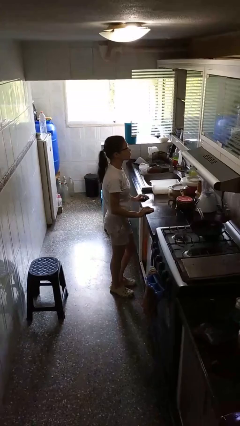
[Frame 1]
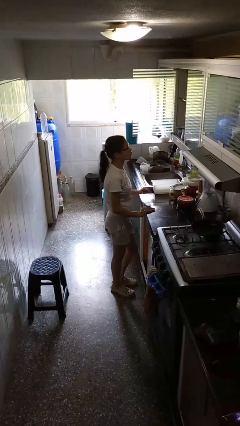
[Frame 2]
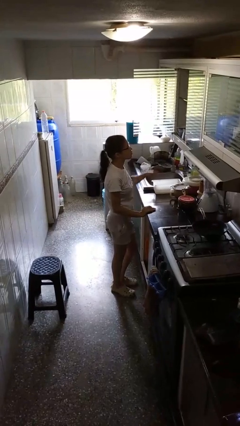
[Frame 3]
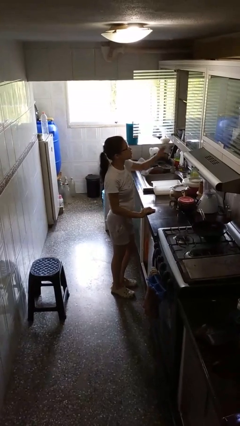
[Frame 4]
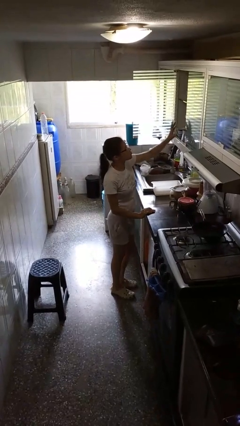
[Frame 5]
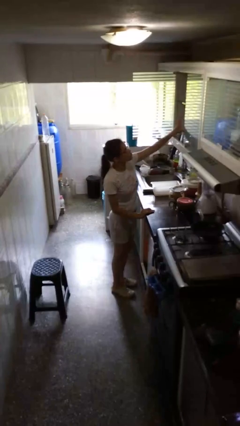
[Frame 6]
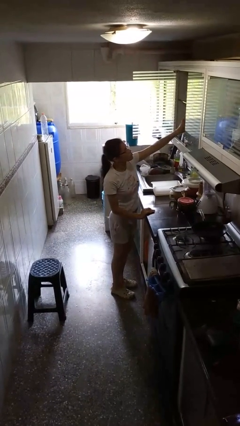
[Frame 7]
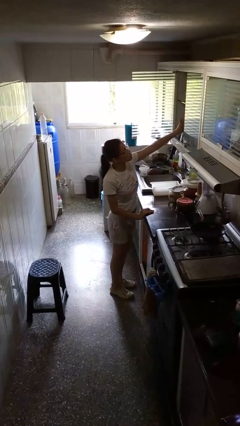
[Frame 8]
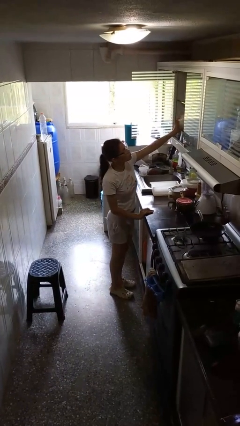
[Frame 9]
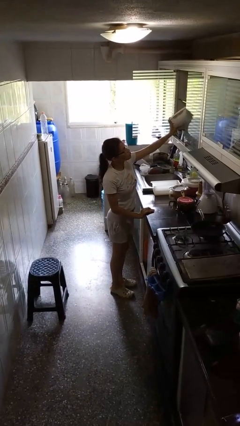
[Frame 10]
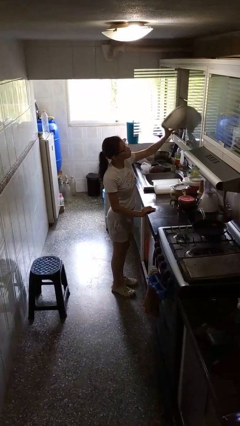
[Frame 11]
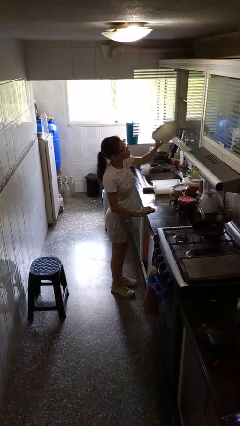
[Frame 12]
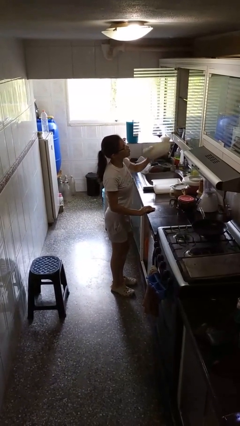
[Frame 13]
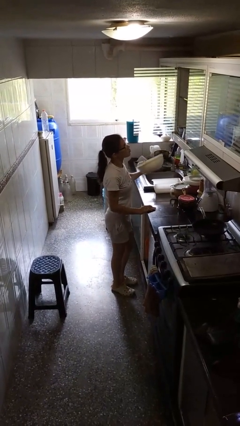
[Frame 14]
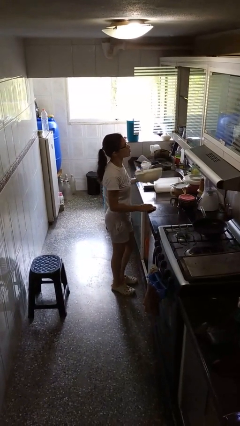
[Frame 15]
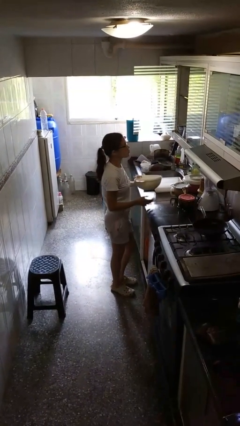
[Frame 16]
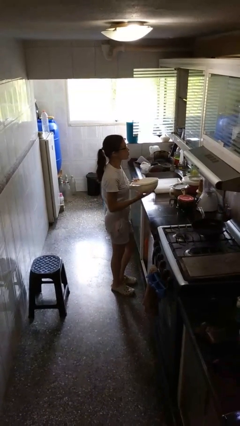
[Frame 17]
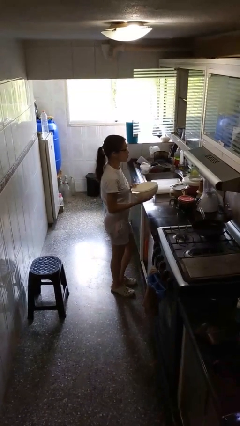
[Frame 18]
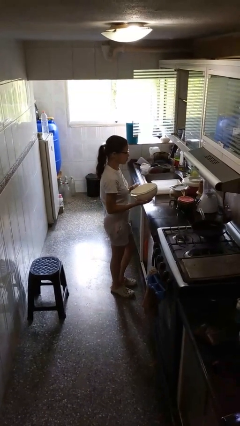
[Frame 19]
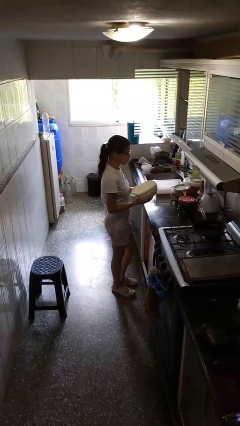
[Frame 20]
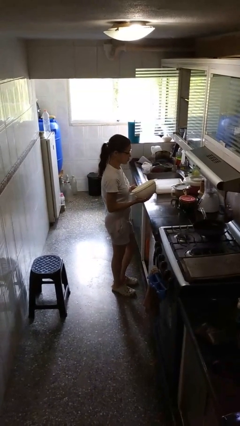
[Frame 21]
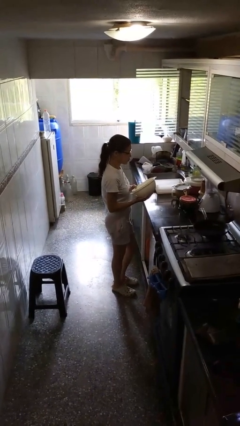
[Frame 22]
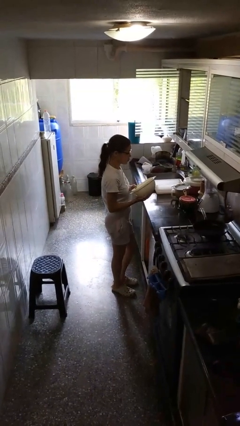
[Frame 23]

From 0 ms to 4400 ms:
person picks up object from cabinet

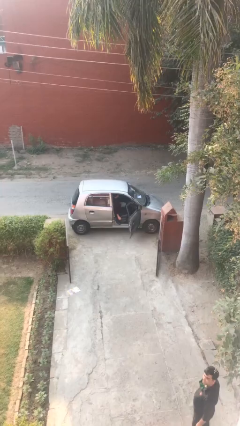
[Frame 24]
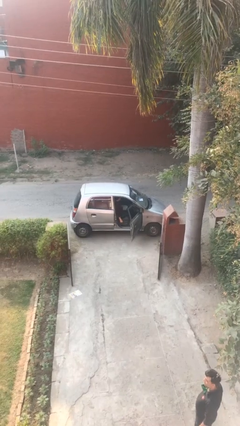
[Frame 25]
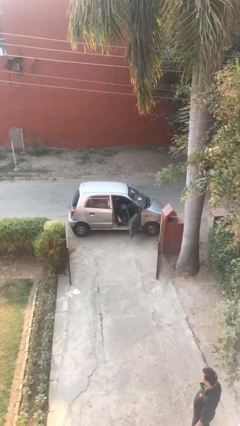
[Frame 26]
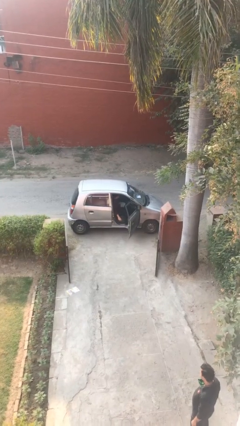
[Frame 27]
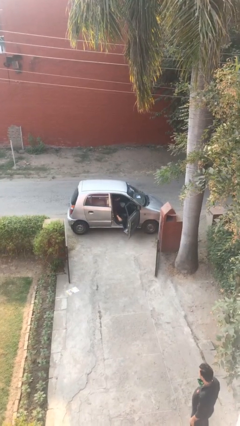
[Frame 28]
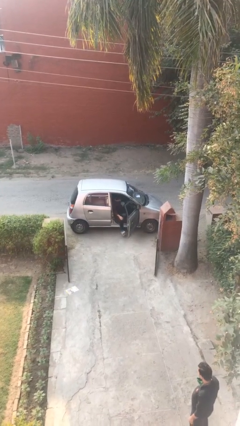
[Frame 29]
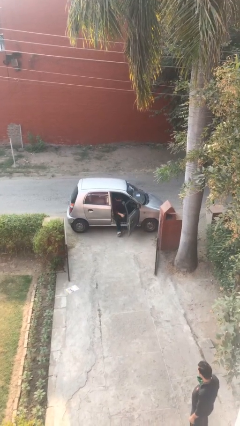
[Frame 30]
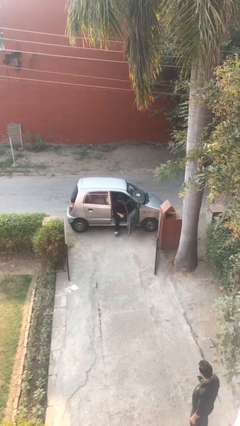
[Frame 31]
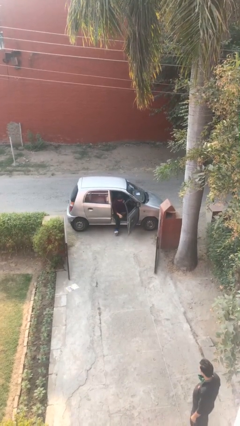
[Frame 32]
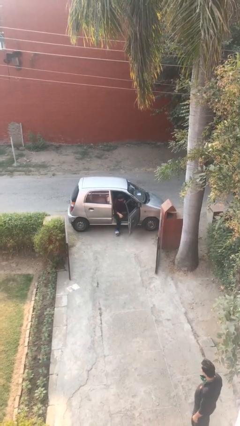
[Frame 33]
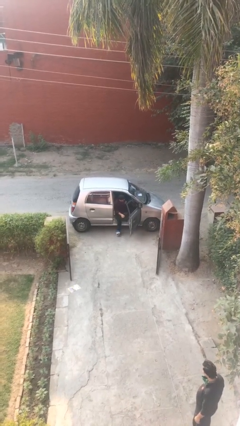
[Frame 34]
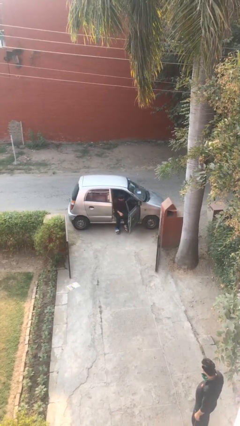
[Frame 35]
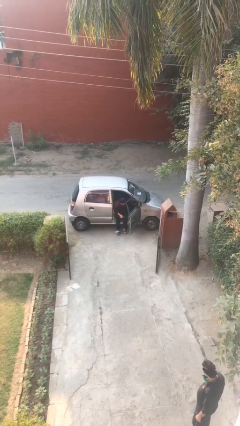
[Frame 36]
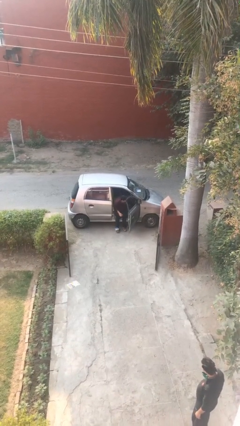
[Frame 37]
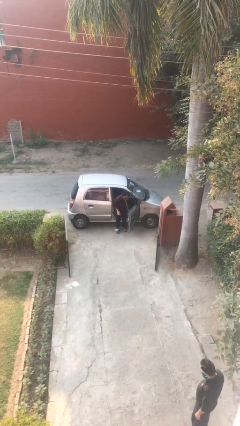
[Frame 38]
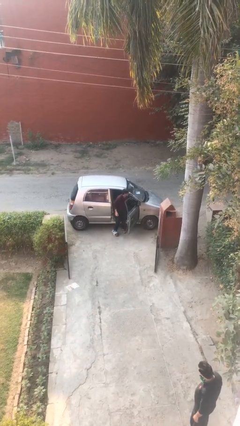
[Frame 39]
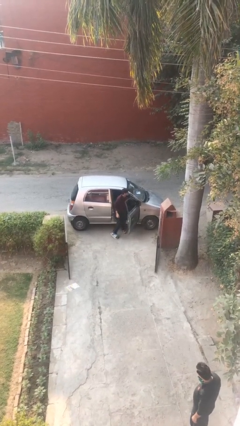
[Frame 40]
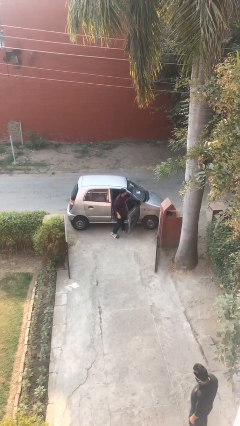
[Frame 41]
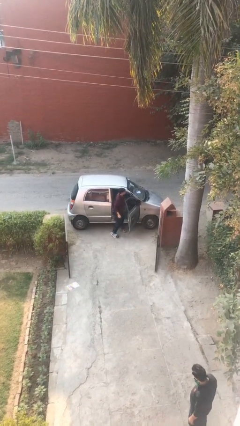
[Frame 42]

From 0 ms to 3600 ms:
person exits car

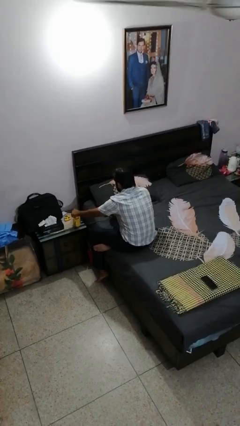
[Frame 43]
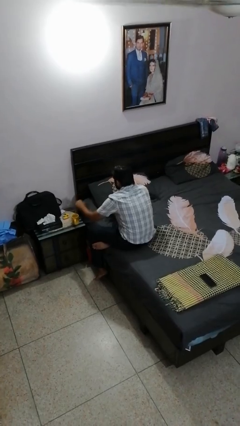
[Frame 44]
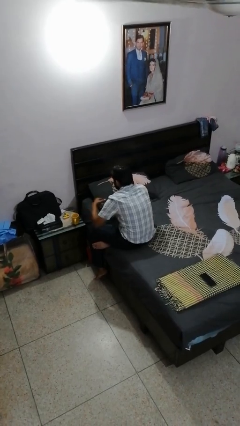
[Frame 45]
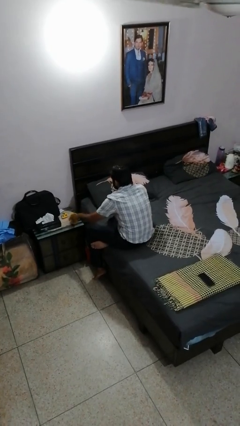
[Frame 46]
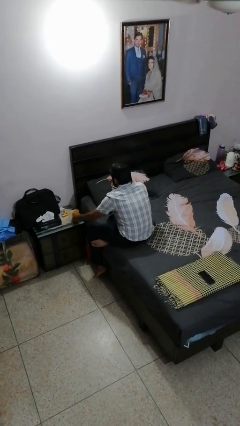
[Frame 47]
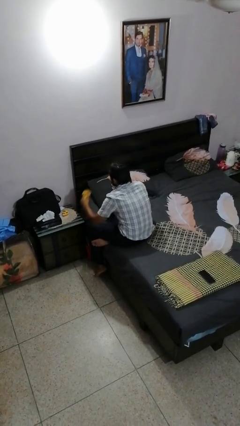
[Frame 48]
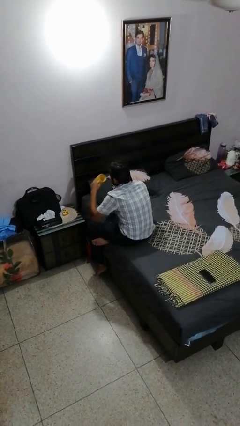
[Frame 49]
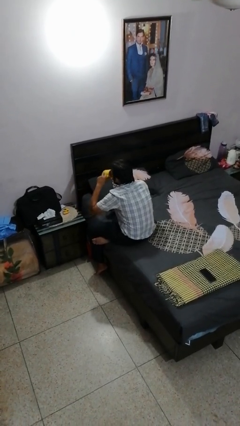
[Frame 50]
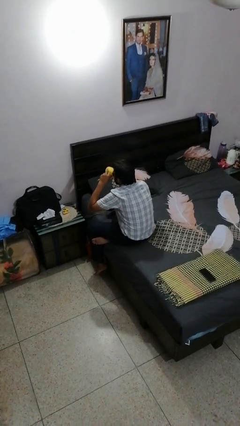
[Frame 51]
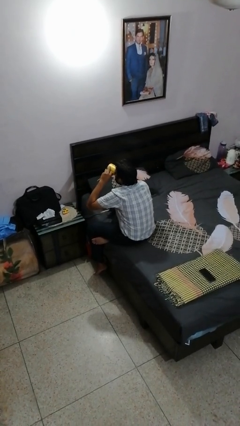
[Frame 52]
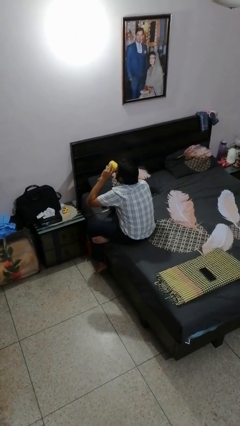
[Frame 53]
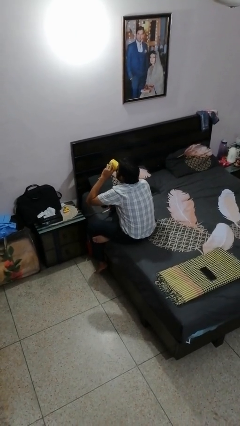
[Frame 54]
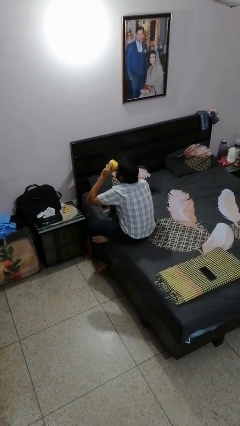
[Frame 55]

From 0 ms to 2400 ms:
person drinks from mug

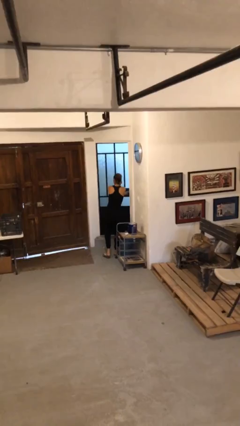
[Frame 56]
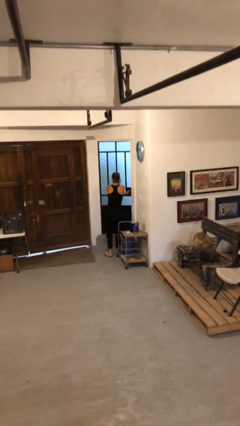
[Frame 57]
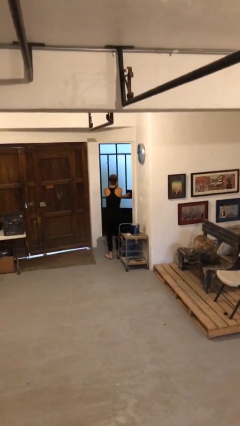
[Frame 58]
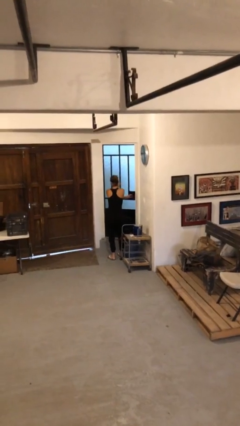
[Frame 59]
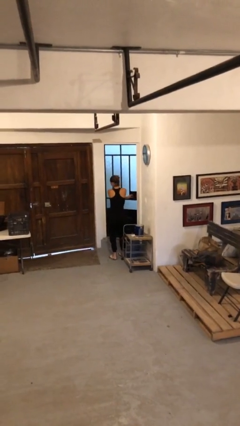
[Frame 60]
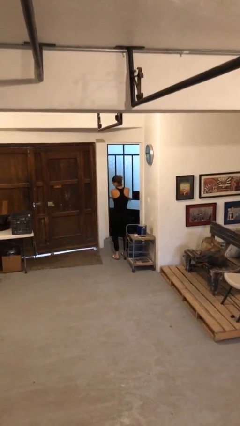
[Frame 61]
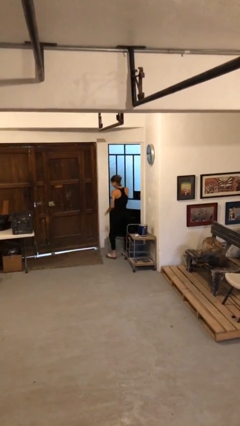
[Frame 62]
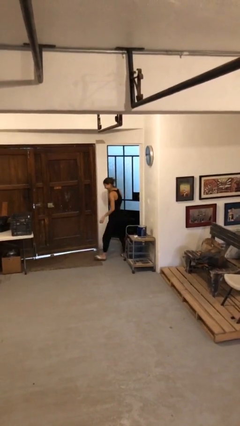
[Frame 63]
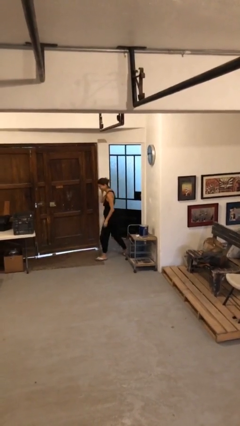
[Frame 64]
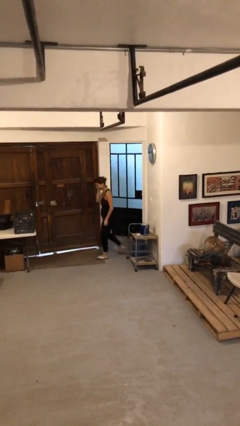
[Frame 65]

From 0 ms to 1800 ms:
person closes facility door

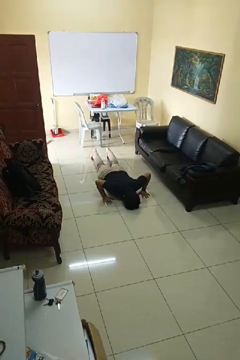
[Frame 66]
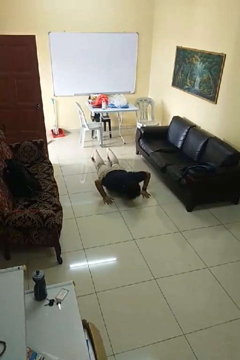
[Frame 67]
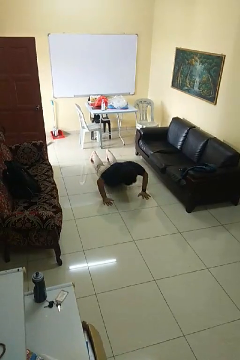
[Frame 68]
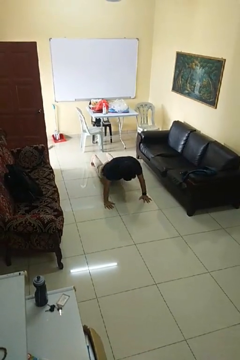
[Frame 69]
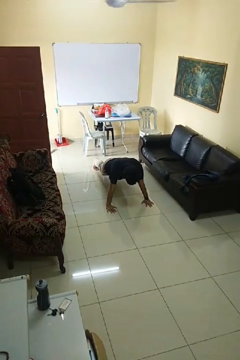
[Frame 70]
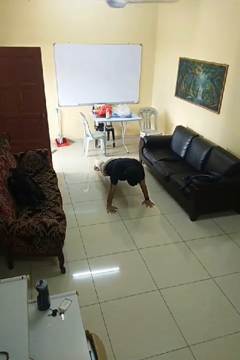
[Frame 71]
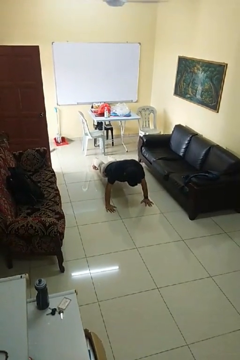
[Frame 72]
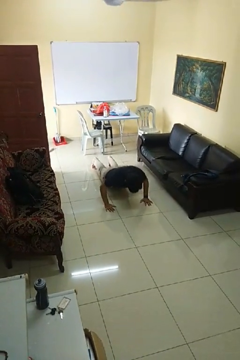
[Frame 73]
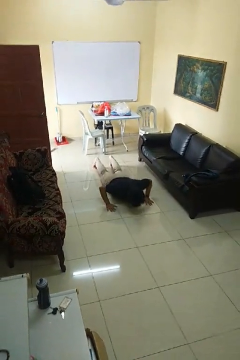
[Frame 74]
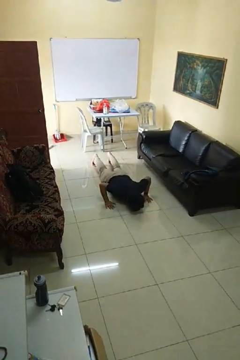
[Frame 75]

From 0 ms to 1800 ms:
person exercises with pushup

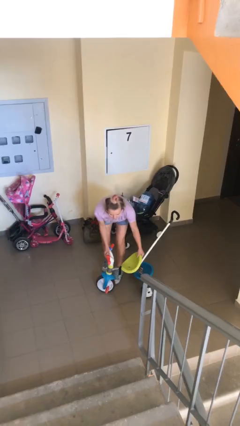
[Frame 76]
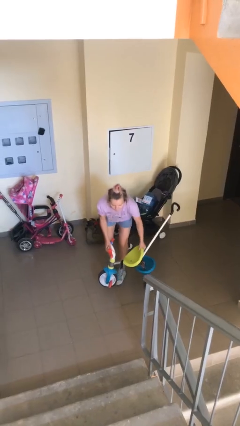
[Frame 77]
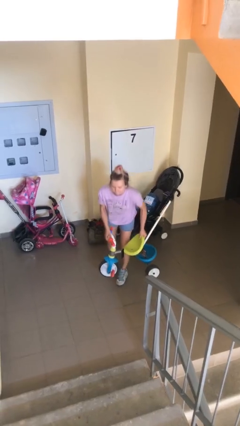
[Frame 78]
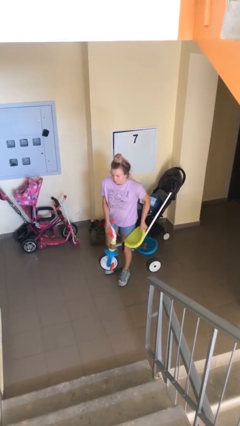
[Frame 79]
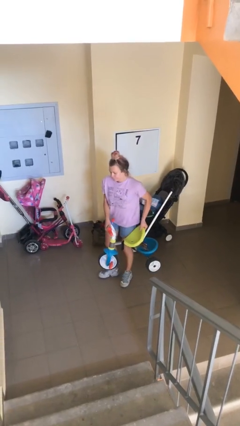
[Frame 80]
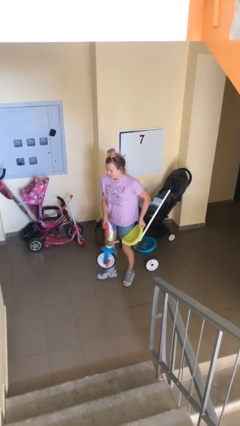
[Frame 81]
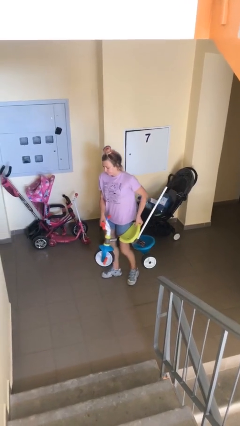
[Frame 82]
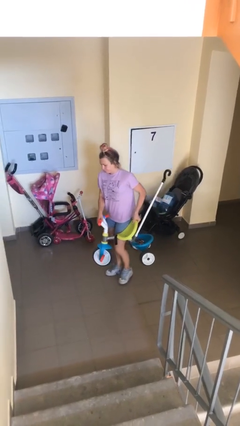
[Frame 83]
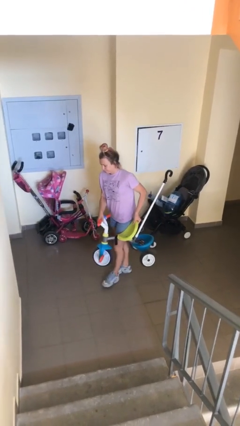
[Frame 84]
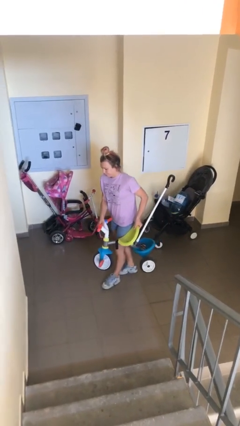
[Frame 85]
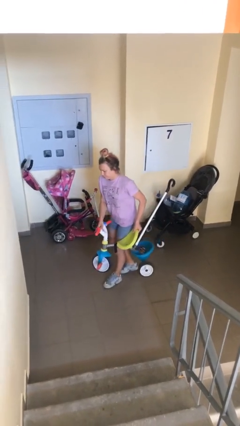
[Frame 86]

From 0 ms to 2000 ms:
person carries bicycle

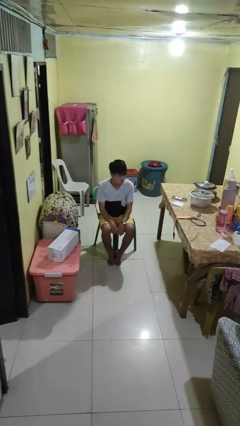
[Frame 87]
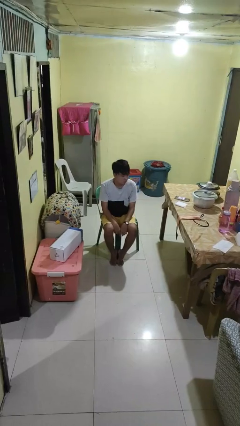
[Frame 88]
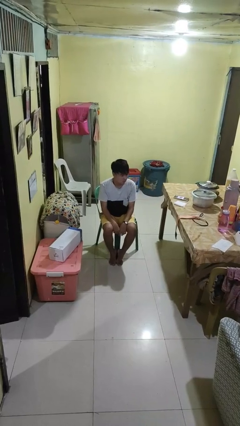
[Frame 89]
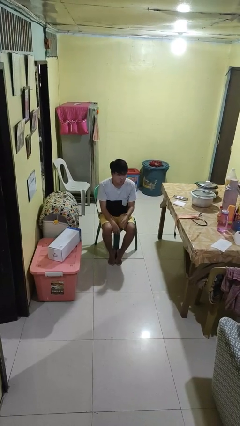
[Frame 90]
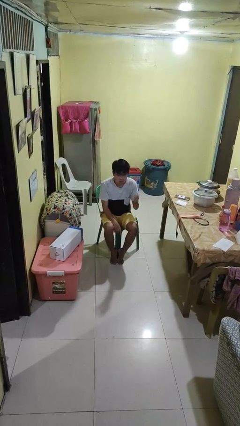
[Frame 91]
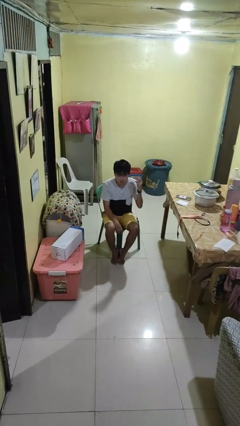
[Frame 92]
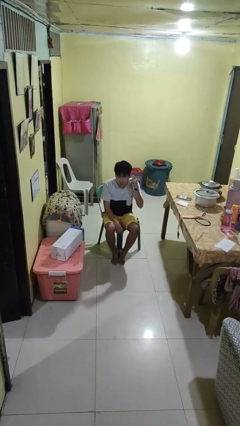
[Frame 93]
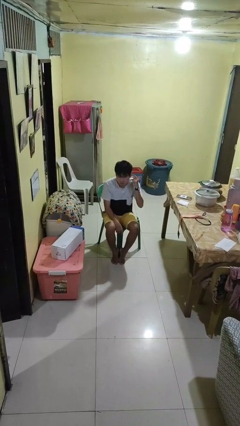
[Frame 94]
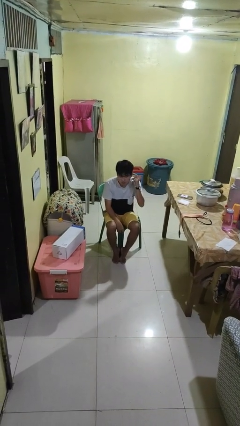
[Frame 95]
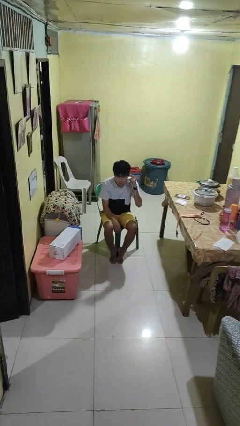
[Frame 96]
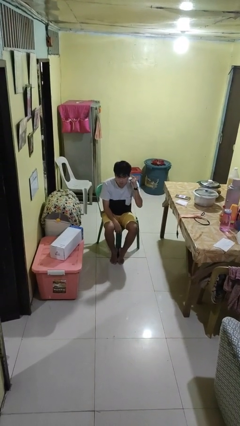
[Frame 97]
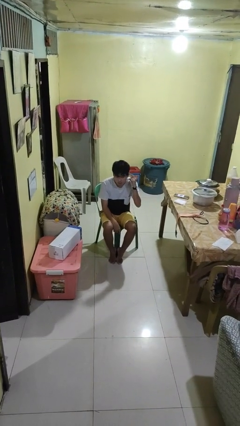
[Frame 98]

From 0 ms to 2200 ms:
person gestures listen closely
